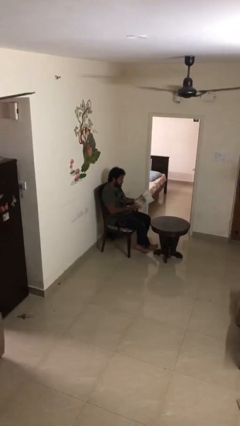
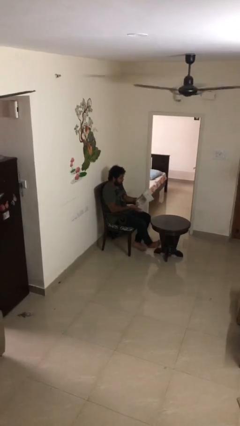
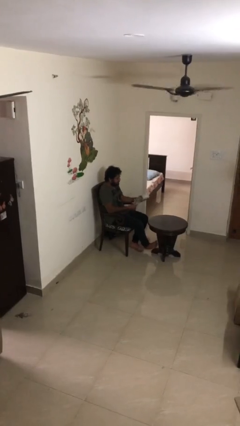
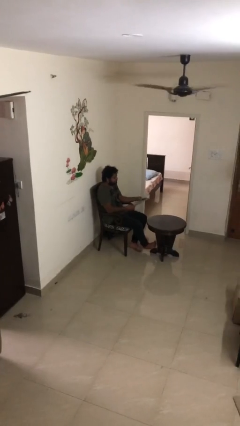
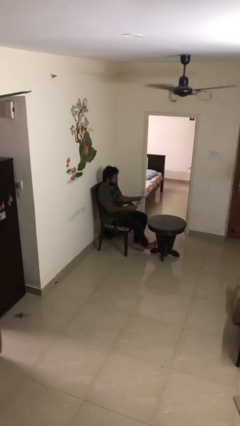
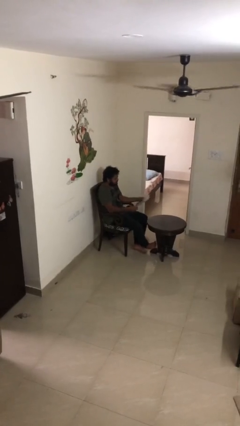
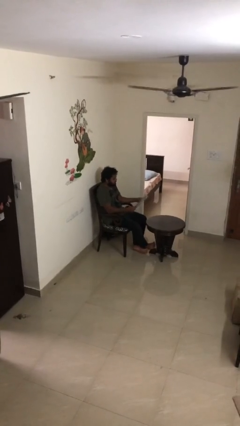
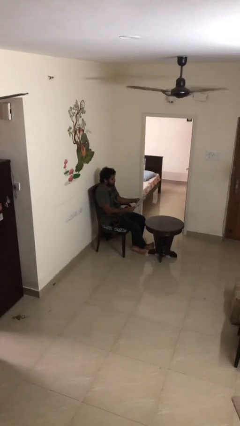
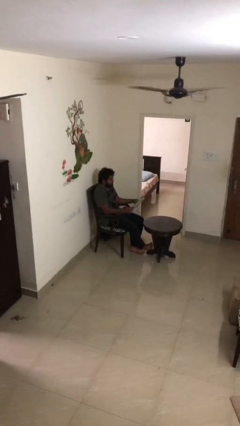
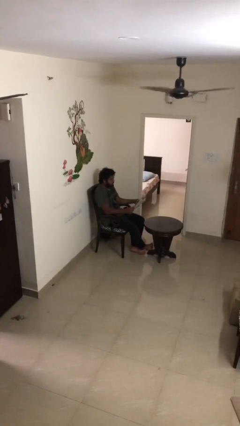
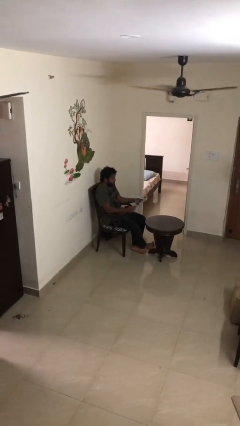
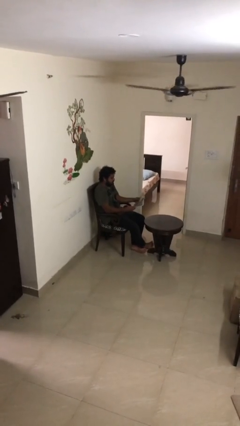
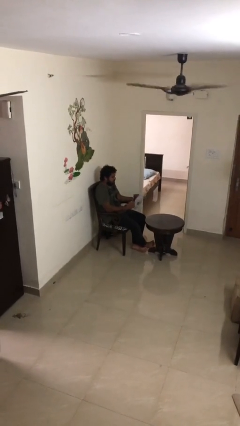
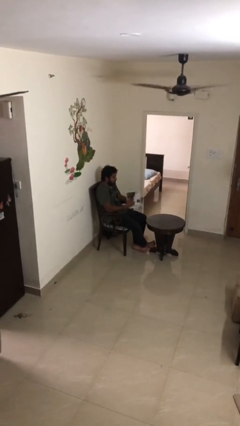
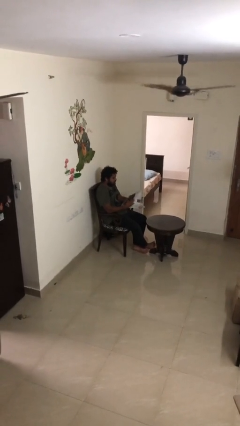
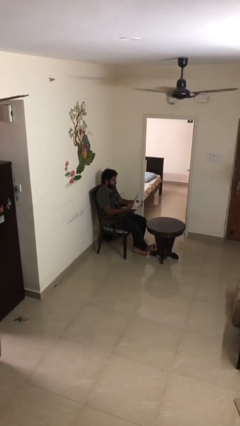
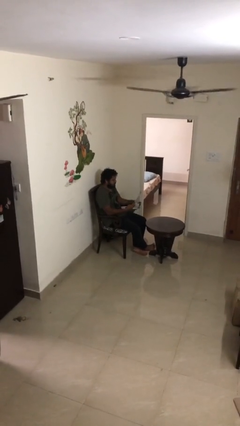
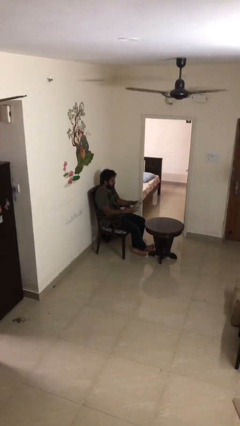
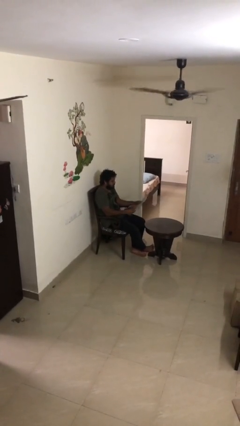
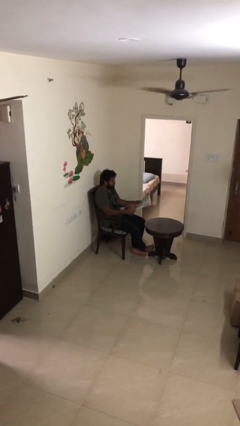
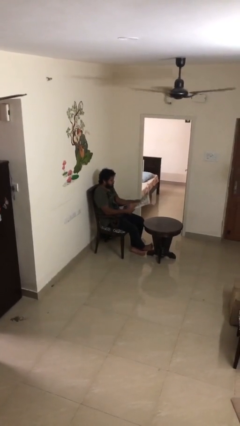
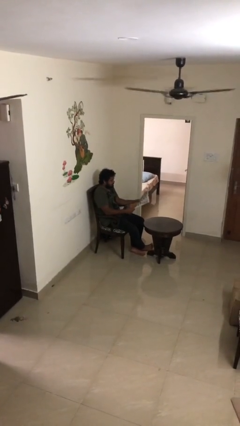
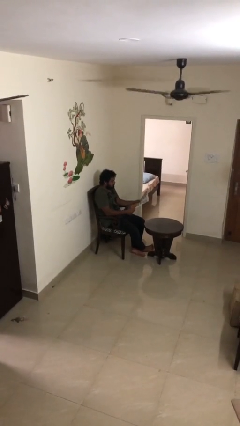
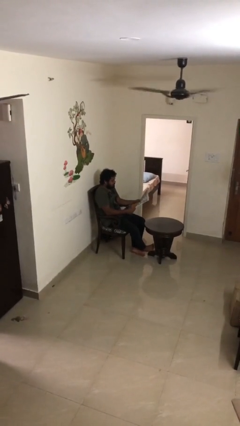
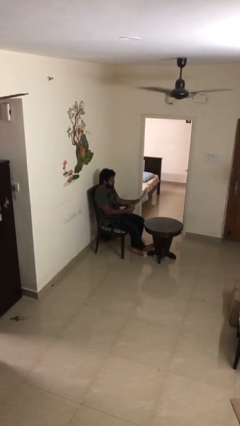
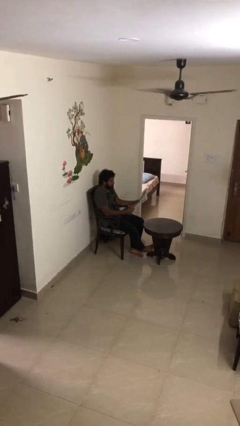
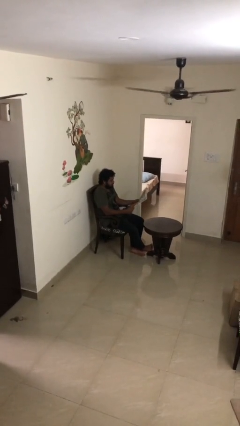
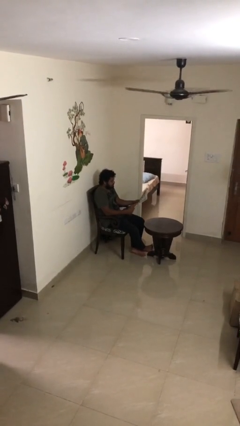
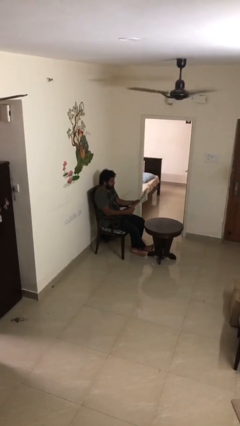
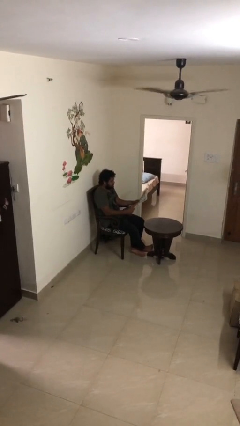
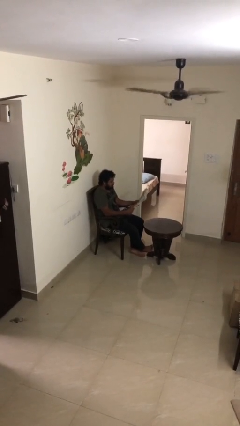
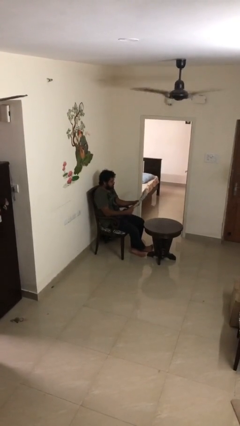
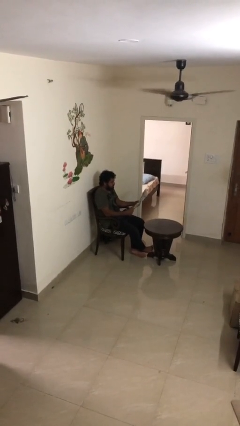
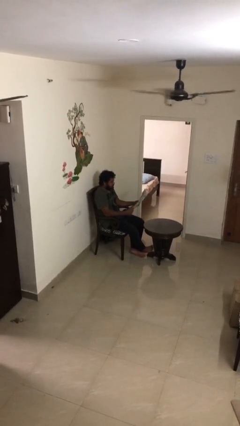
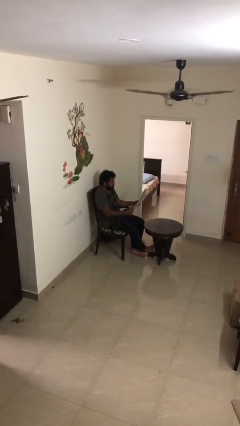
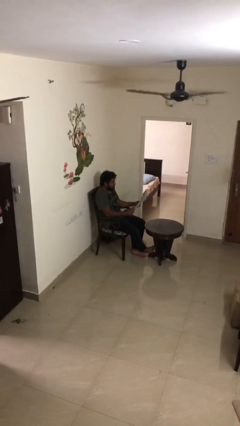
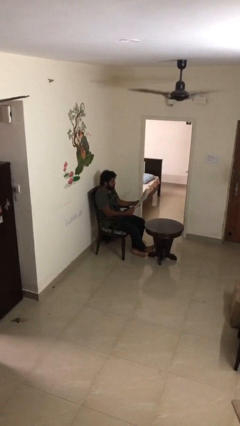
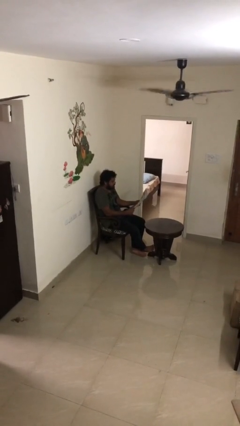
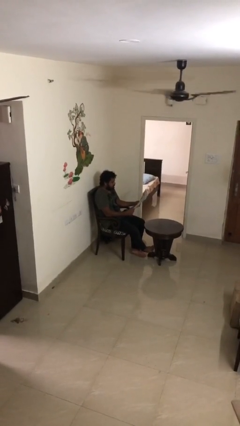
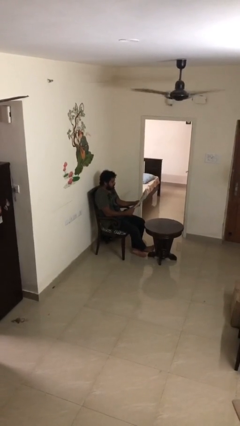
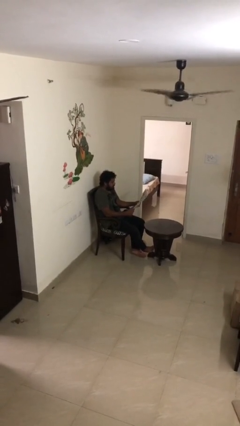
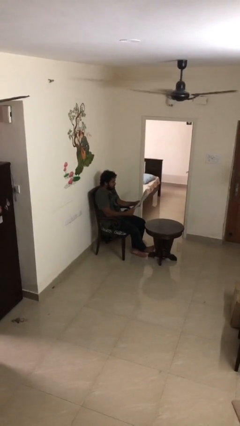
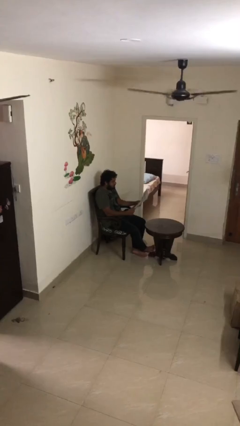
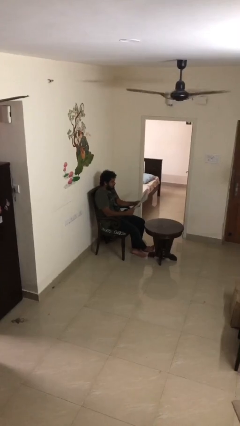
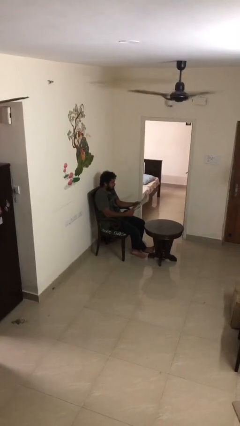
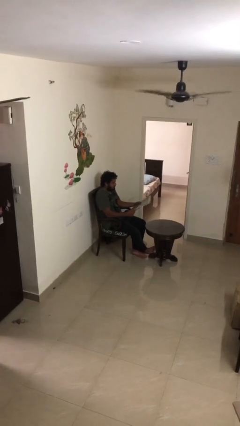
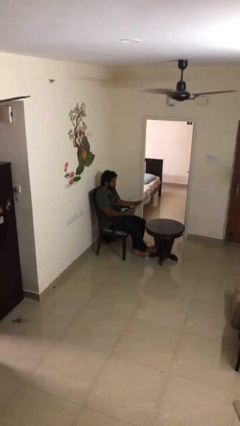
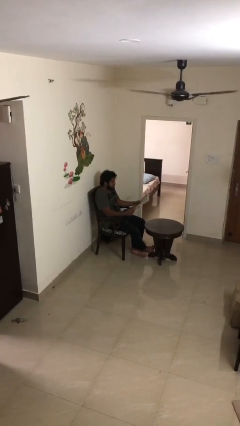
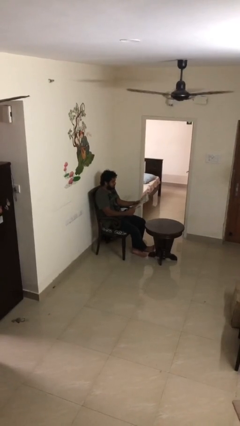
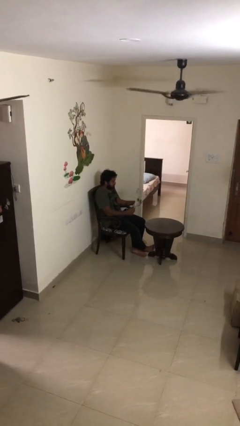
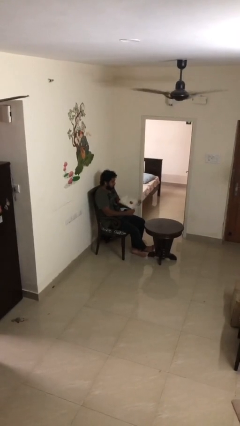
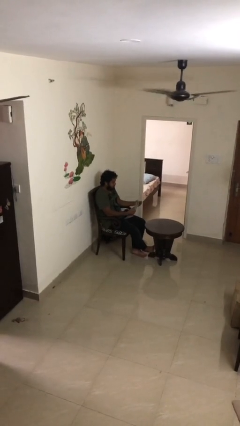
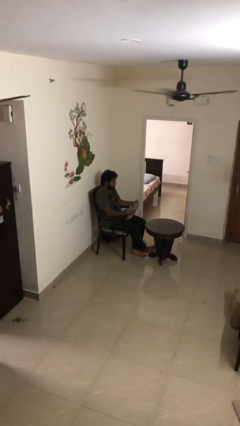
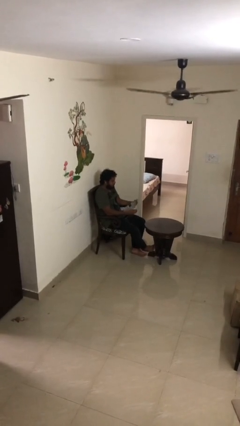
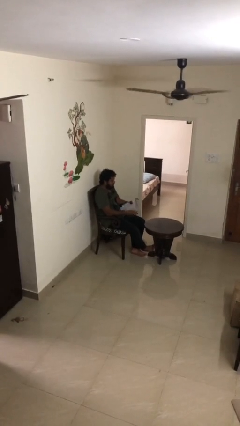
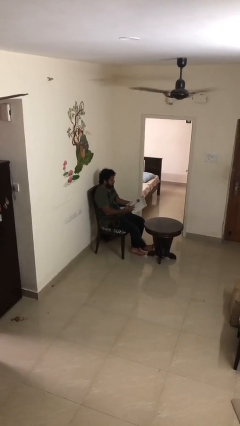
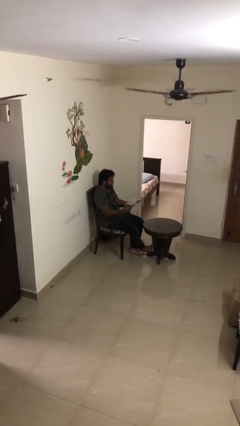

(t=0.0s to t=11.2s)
person reads document

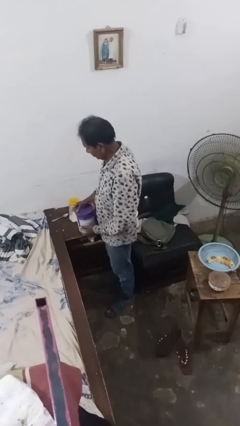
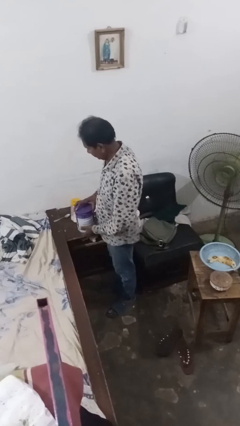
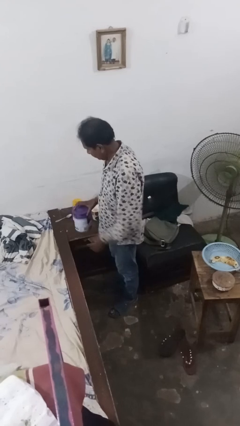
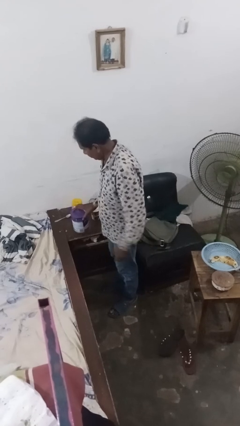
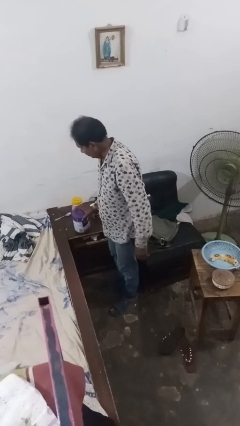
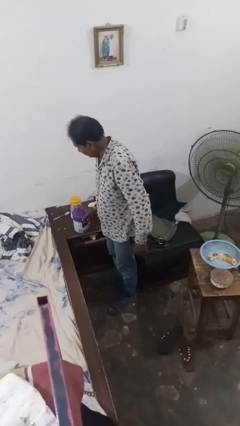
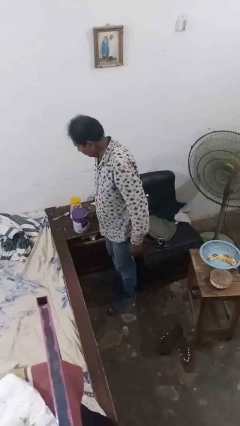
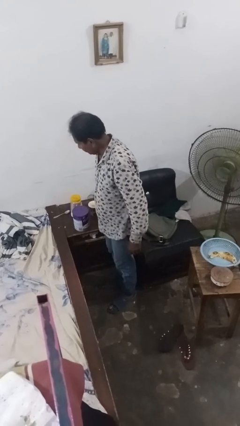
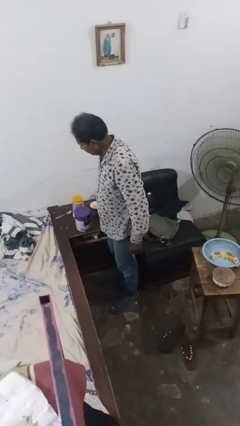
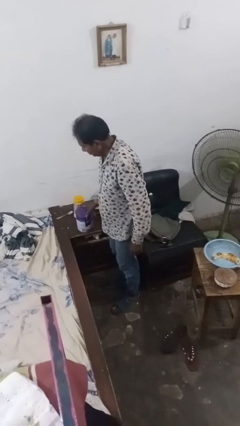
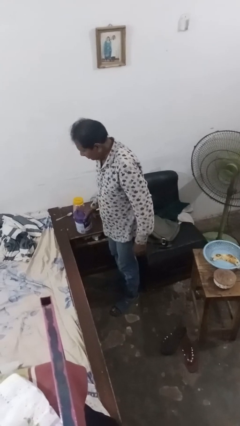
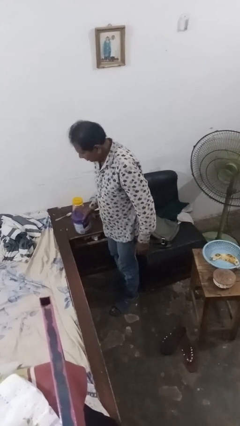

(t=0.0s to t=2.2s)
person puts down object on bed

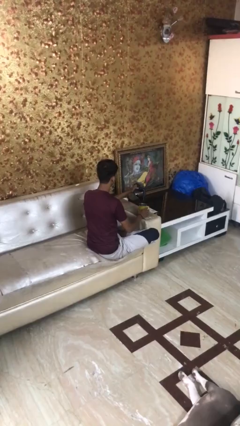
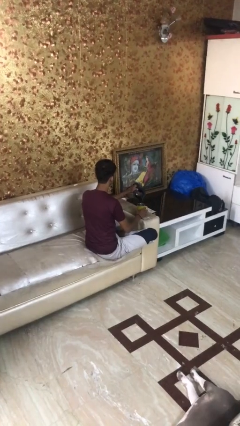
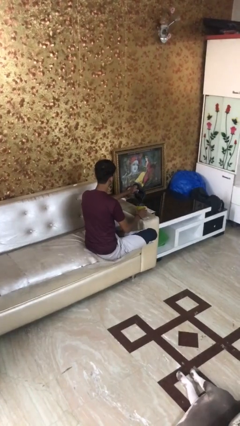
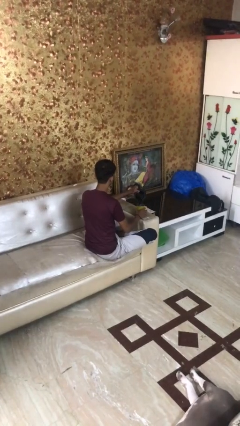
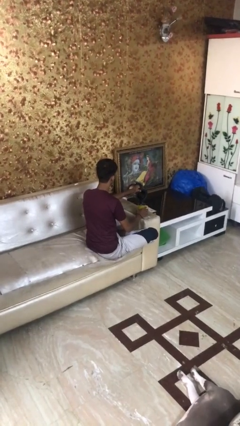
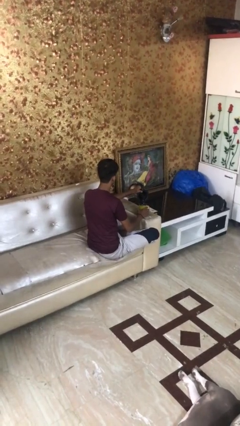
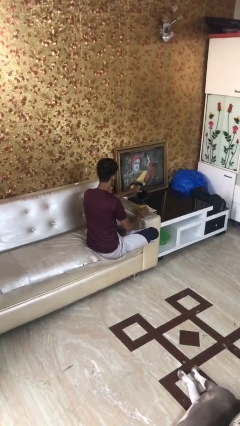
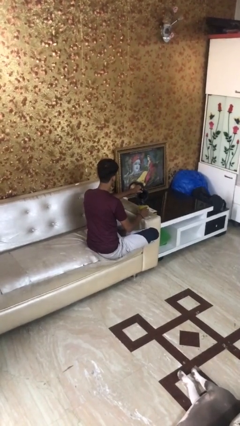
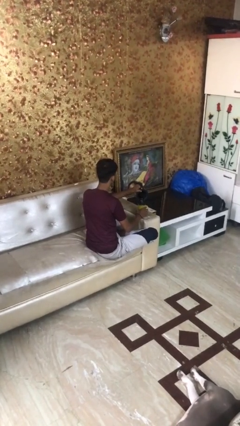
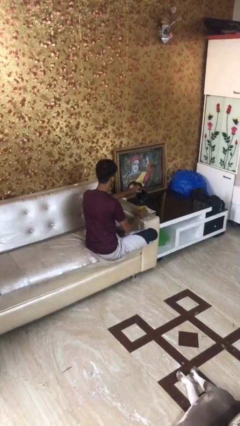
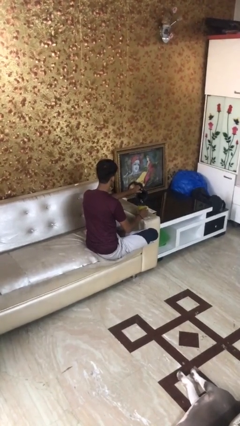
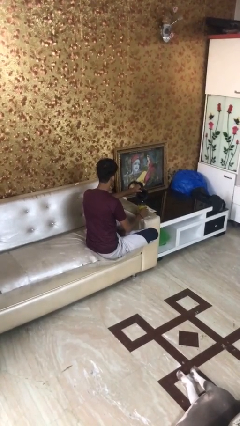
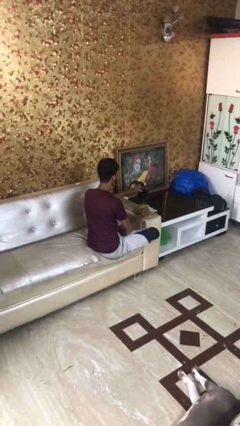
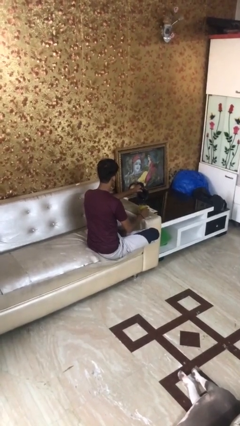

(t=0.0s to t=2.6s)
person pours coffee into mug

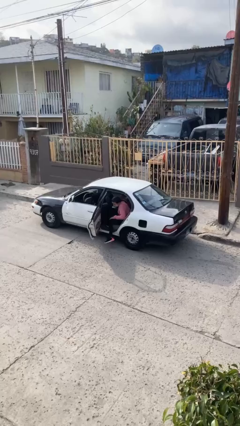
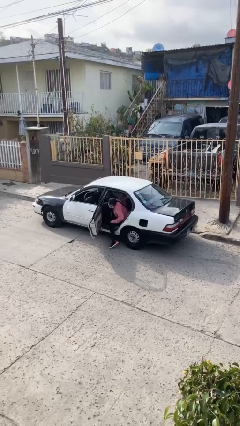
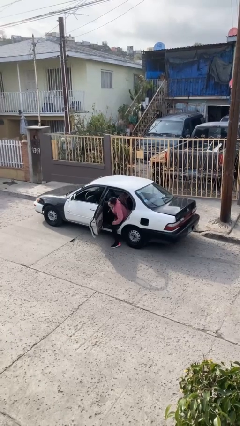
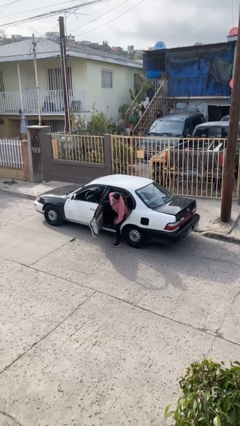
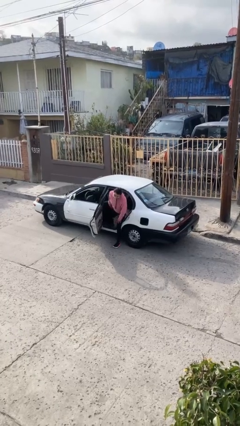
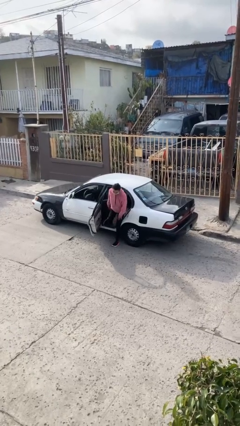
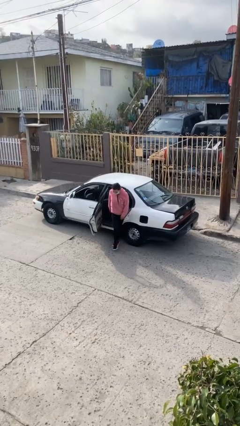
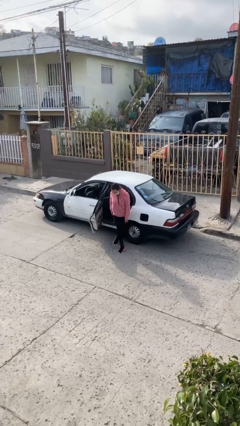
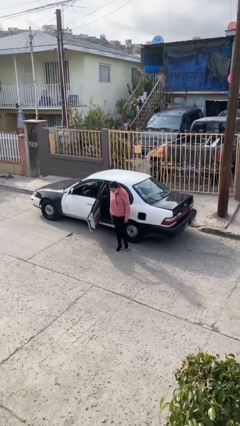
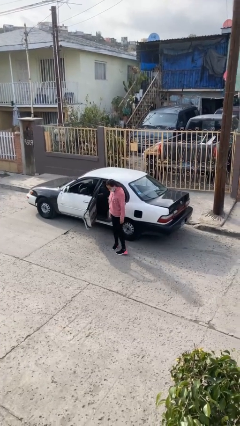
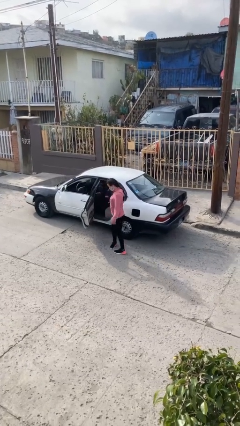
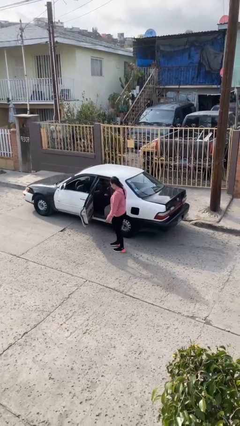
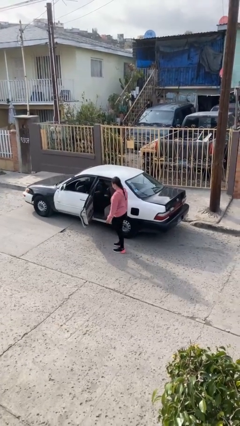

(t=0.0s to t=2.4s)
person exits car
